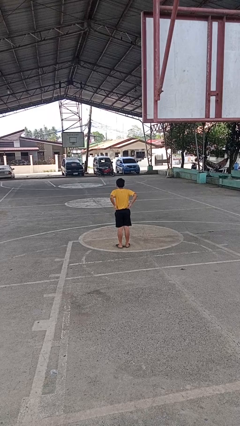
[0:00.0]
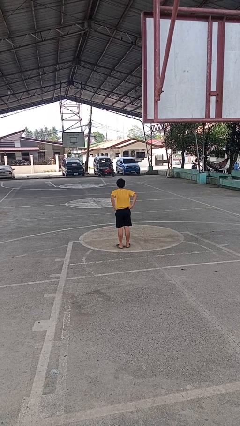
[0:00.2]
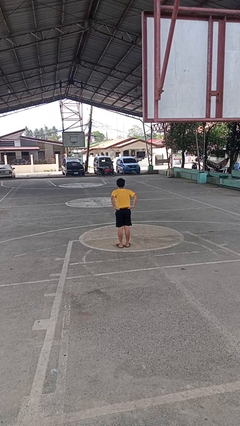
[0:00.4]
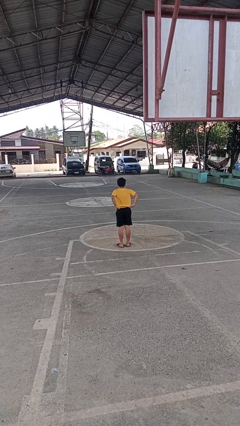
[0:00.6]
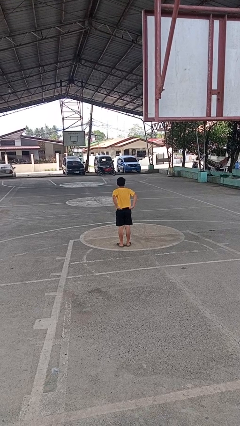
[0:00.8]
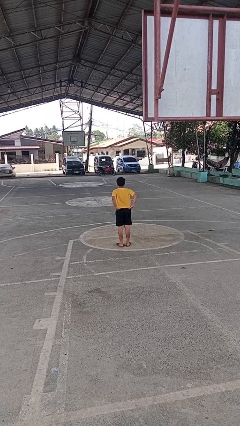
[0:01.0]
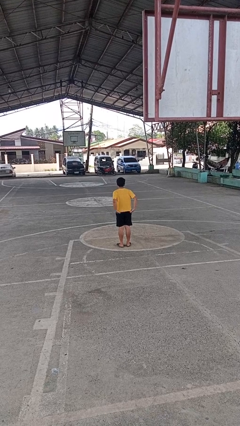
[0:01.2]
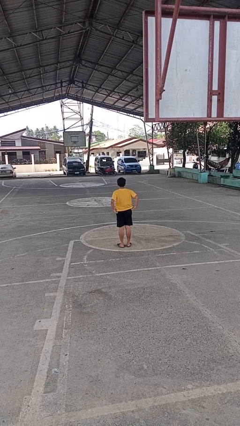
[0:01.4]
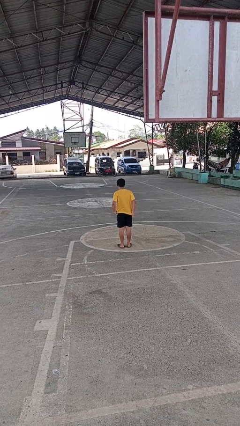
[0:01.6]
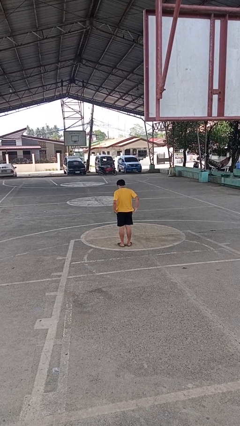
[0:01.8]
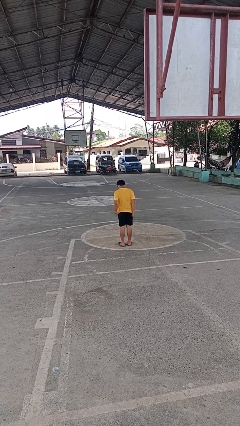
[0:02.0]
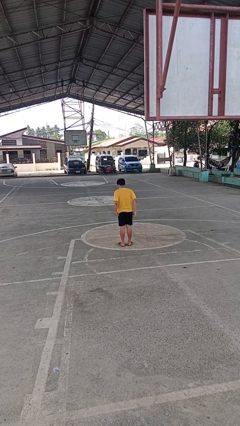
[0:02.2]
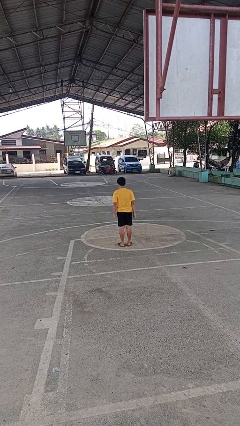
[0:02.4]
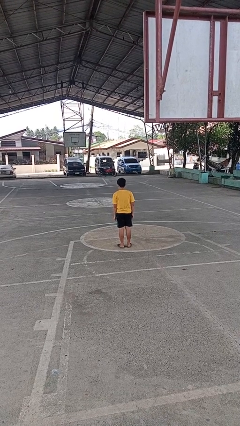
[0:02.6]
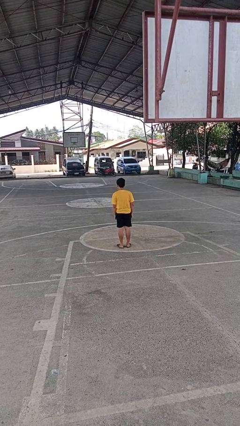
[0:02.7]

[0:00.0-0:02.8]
person untucks shirt

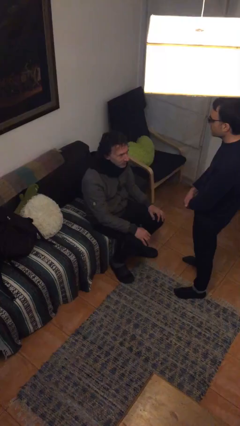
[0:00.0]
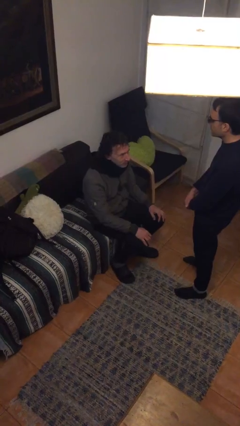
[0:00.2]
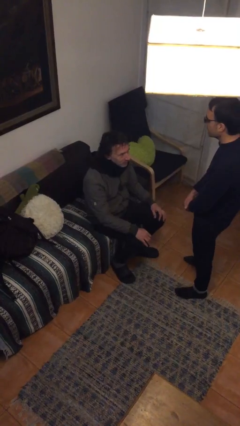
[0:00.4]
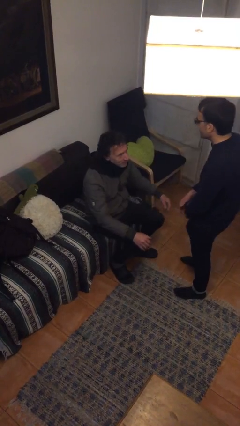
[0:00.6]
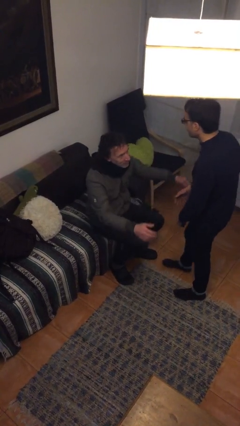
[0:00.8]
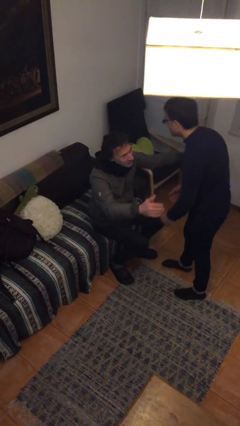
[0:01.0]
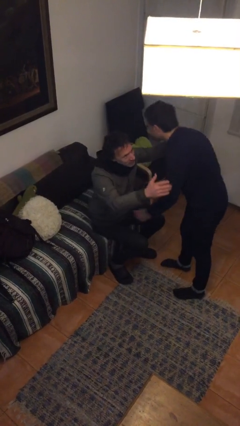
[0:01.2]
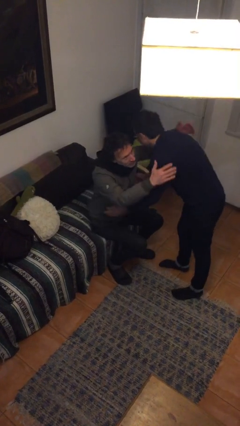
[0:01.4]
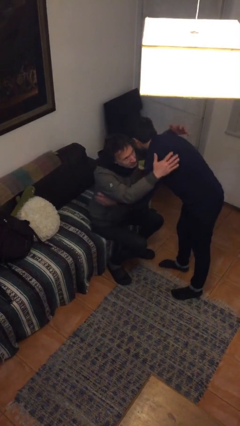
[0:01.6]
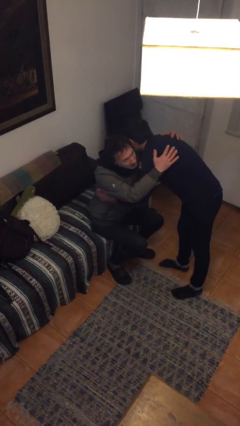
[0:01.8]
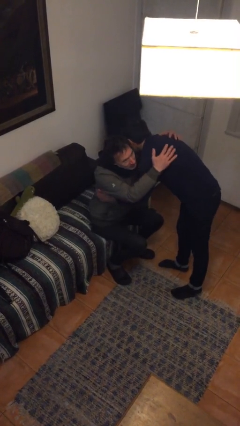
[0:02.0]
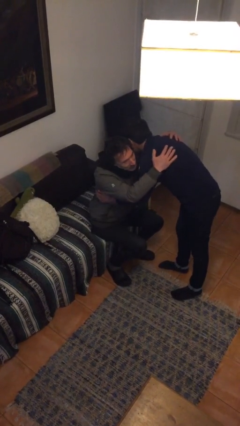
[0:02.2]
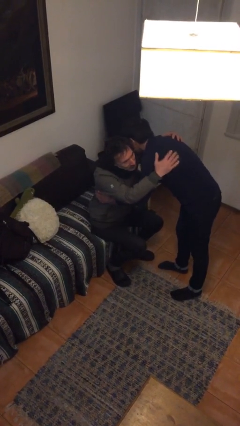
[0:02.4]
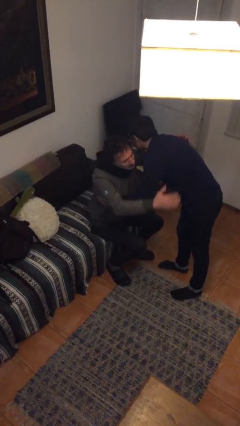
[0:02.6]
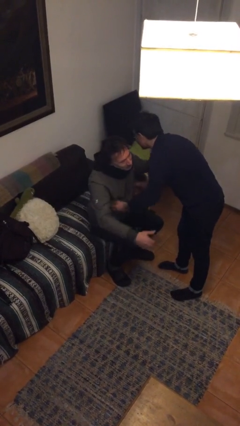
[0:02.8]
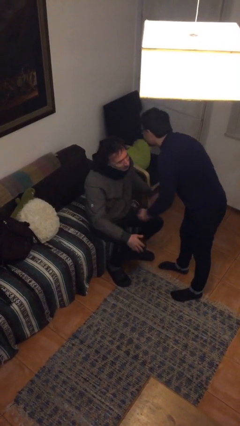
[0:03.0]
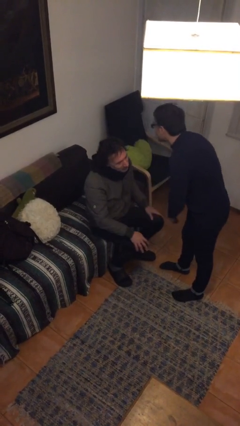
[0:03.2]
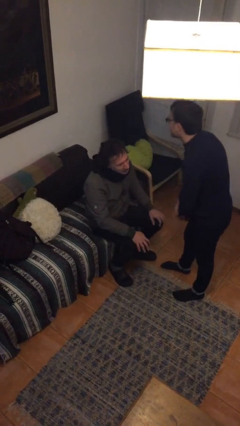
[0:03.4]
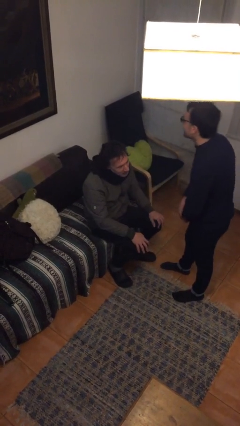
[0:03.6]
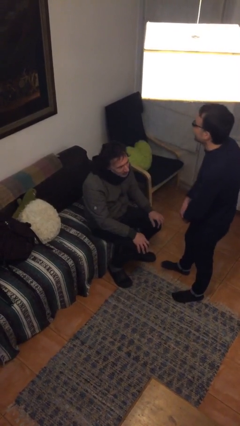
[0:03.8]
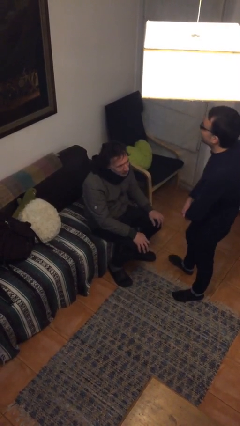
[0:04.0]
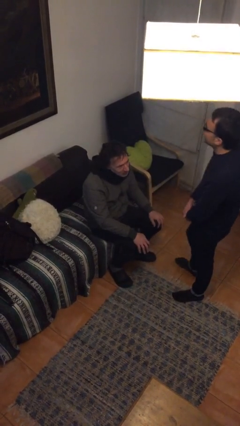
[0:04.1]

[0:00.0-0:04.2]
person embraces person

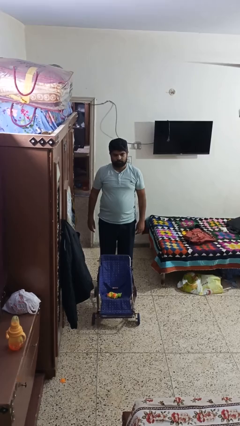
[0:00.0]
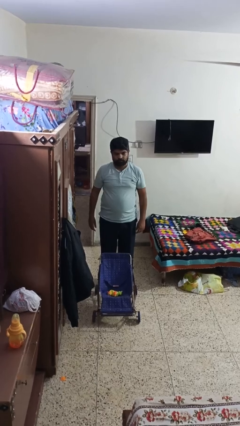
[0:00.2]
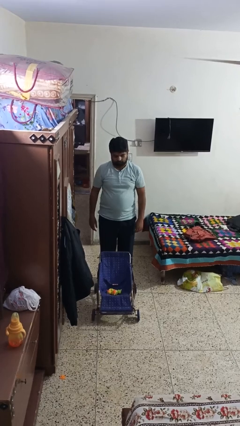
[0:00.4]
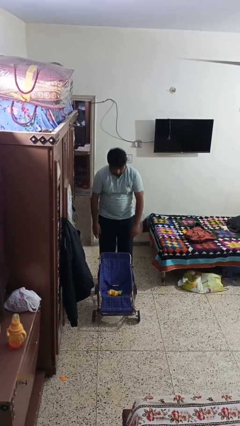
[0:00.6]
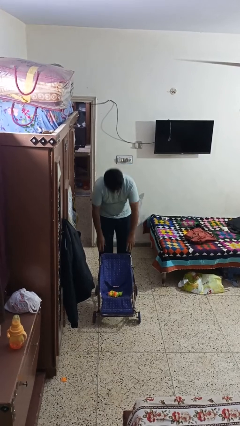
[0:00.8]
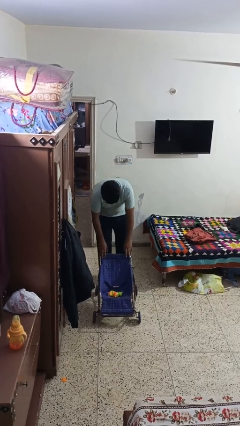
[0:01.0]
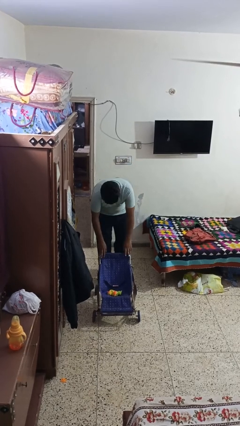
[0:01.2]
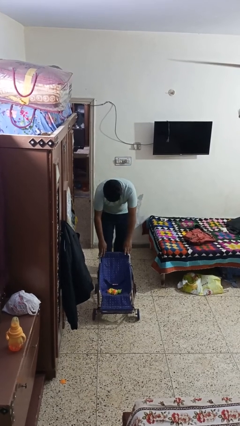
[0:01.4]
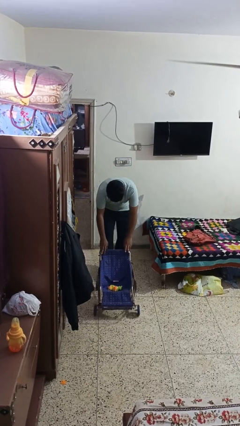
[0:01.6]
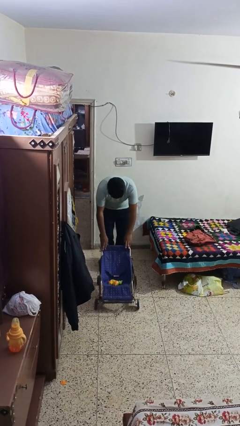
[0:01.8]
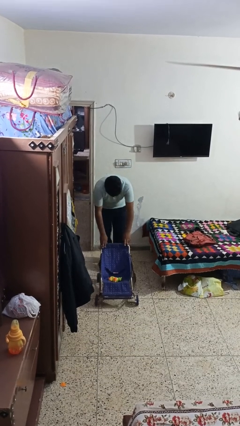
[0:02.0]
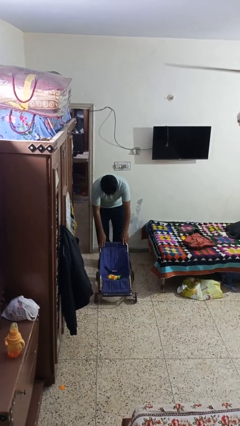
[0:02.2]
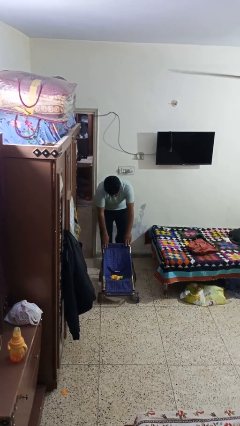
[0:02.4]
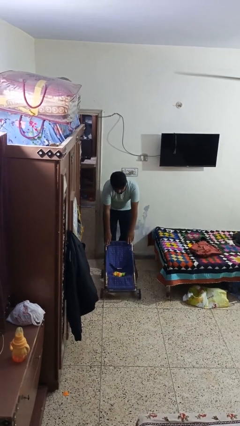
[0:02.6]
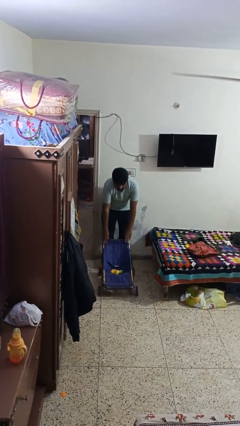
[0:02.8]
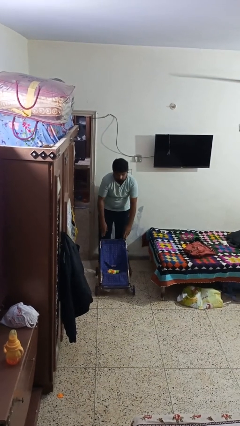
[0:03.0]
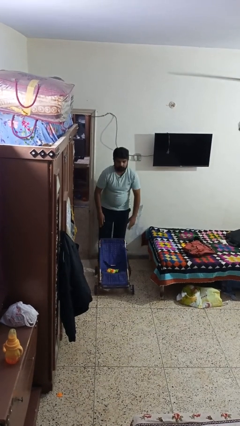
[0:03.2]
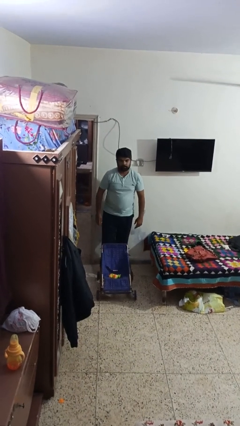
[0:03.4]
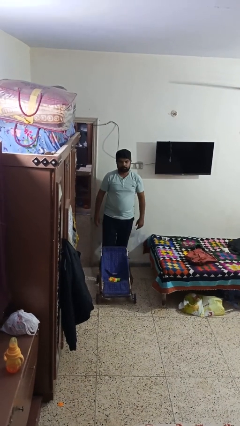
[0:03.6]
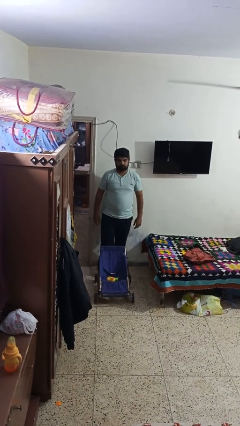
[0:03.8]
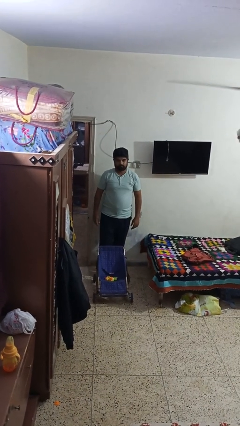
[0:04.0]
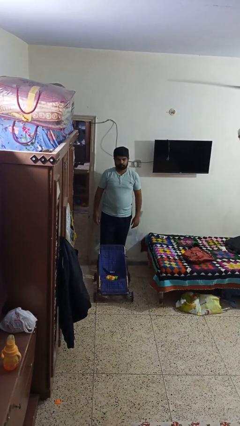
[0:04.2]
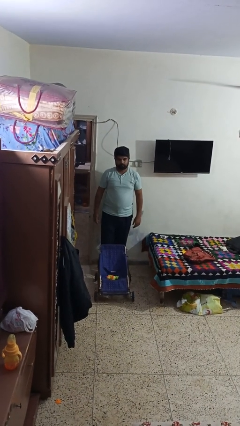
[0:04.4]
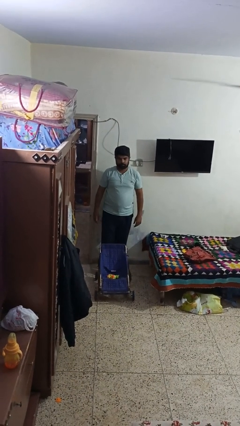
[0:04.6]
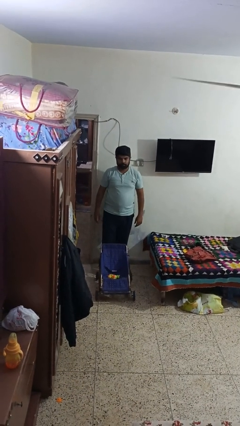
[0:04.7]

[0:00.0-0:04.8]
person pulls wheeled cart

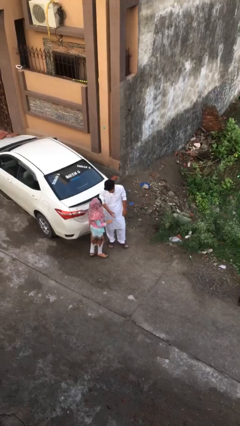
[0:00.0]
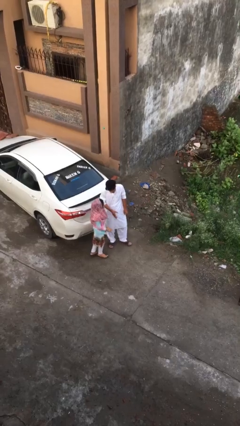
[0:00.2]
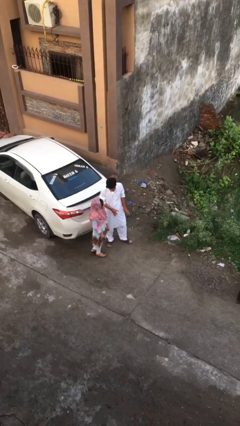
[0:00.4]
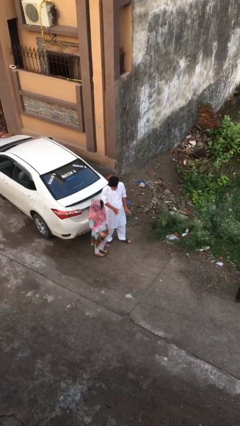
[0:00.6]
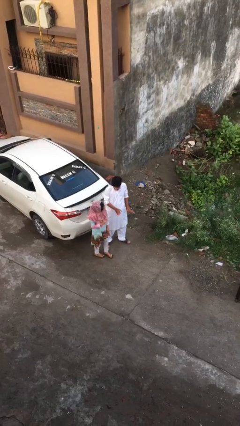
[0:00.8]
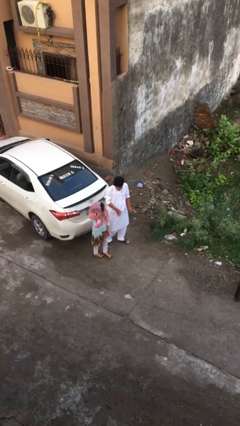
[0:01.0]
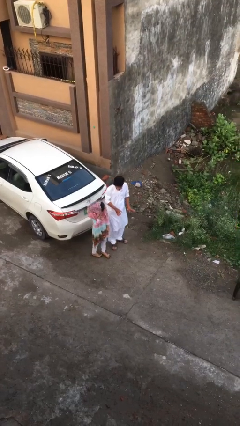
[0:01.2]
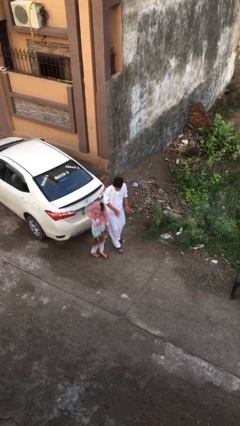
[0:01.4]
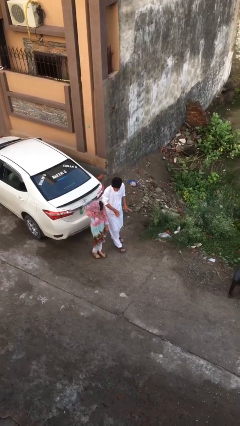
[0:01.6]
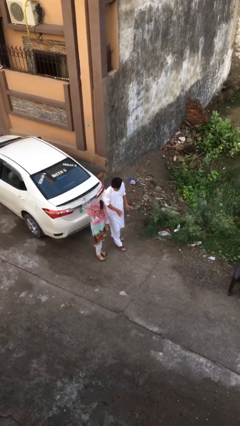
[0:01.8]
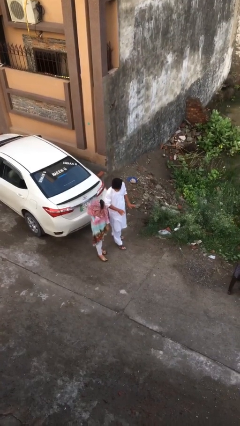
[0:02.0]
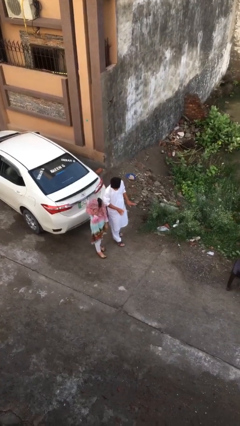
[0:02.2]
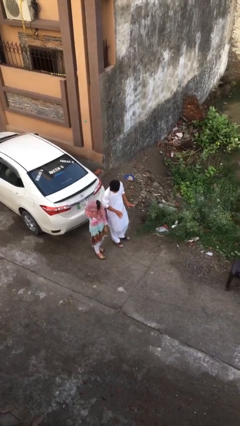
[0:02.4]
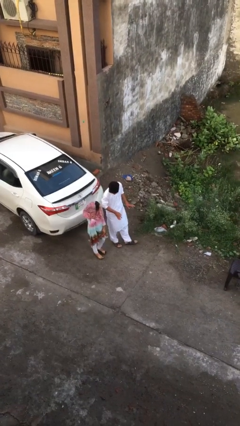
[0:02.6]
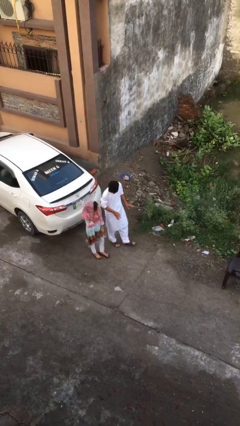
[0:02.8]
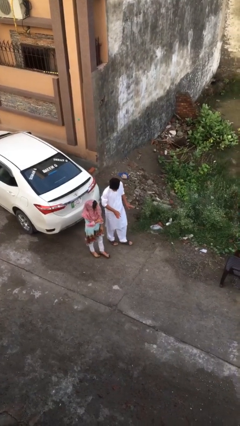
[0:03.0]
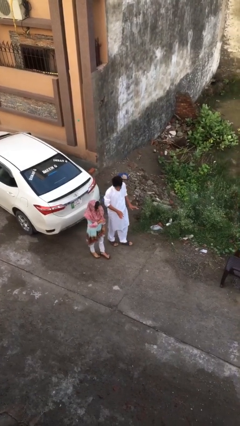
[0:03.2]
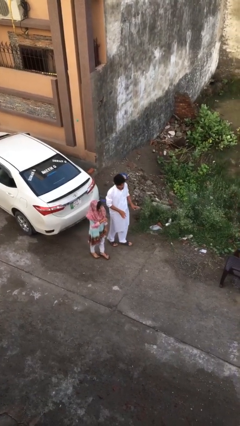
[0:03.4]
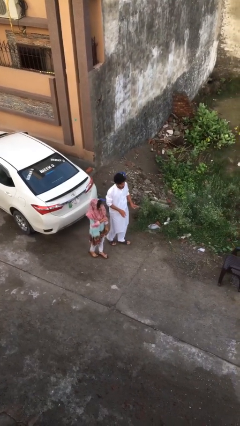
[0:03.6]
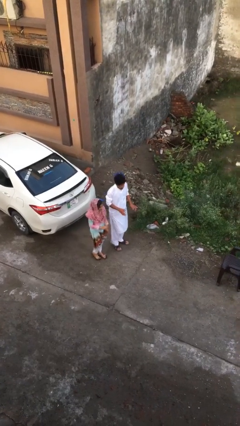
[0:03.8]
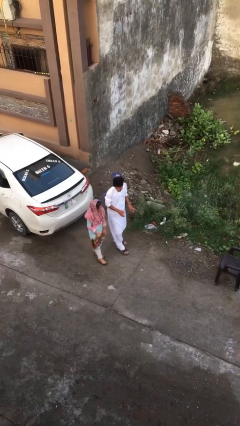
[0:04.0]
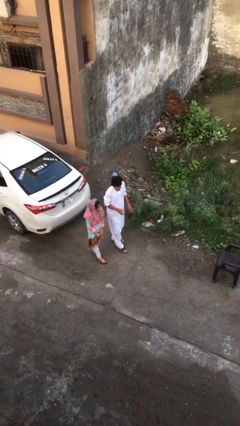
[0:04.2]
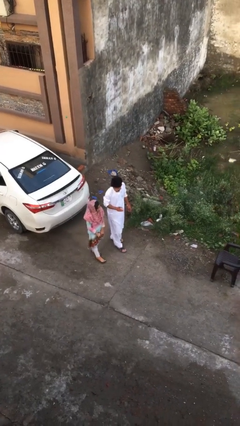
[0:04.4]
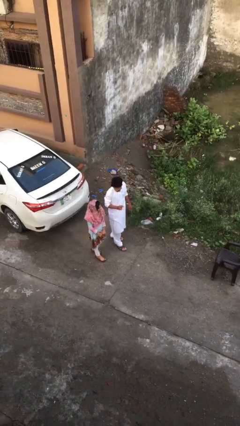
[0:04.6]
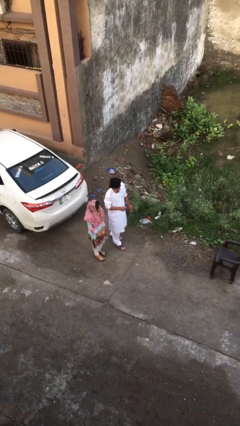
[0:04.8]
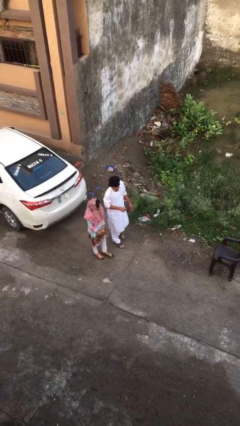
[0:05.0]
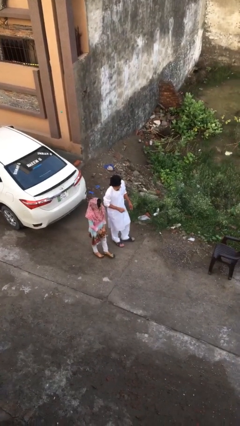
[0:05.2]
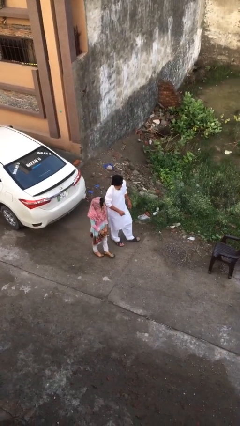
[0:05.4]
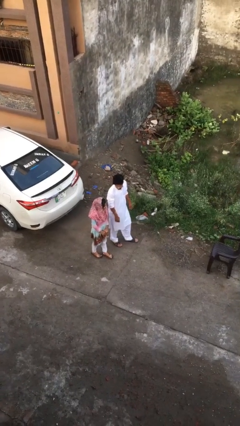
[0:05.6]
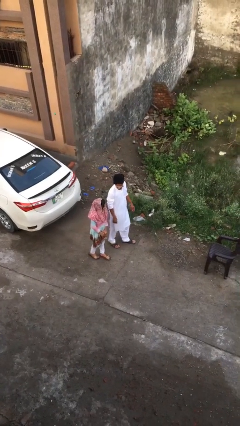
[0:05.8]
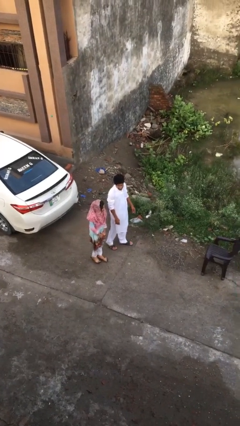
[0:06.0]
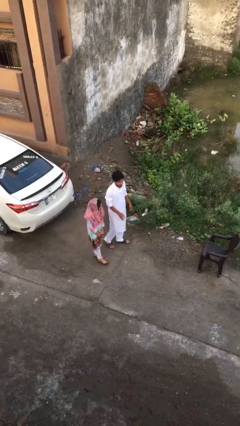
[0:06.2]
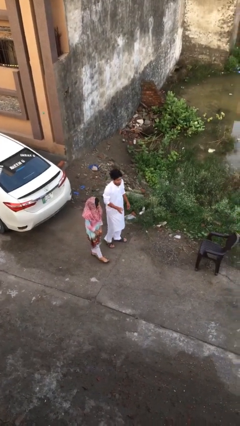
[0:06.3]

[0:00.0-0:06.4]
person talks to person
